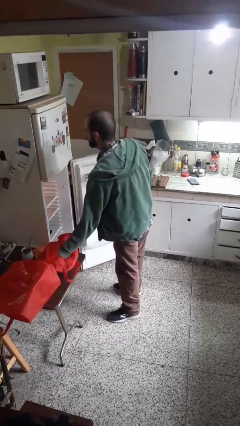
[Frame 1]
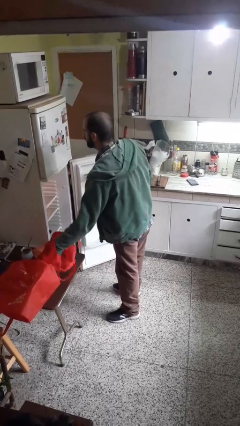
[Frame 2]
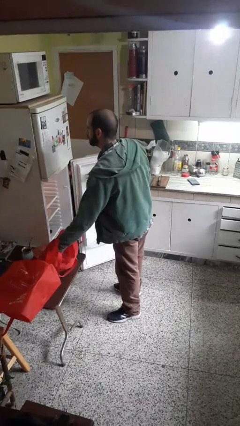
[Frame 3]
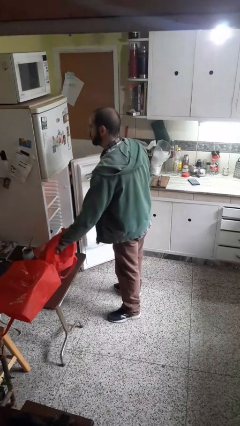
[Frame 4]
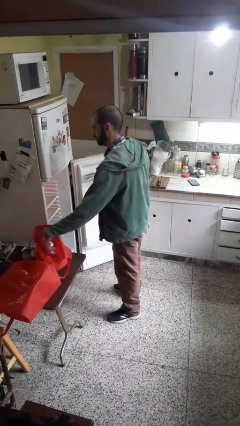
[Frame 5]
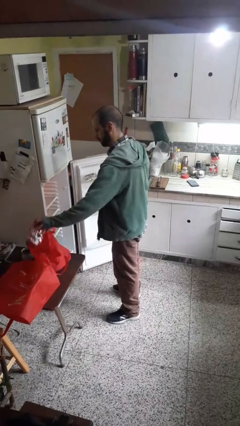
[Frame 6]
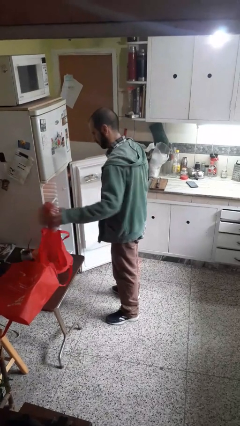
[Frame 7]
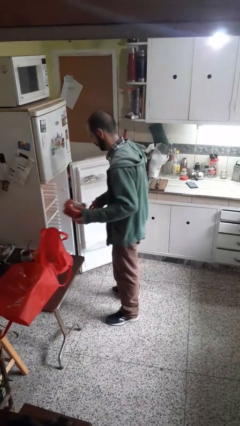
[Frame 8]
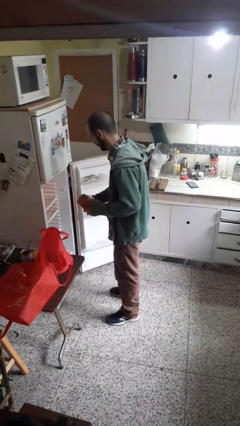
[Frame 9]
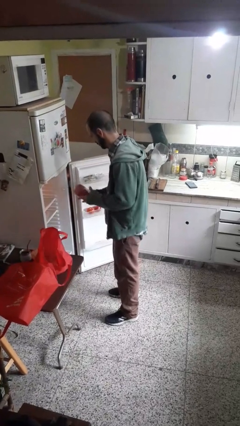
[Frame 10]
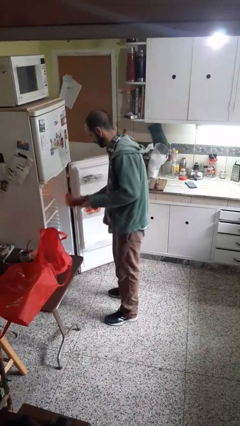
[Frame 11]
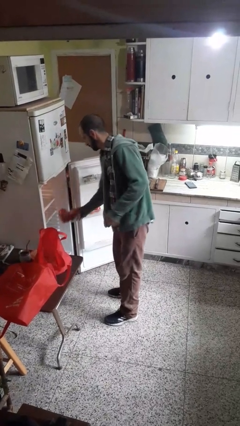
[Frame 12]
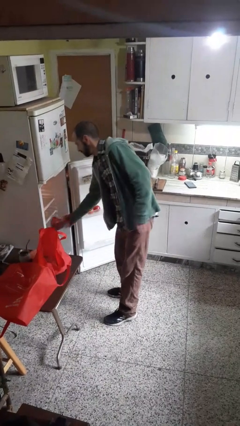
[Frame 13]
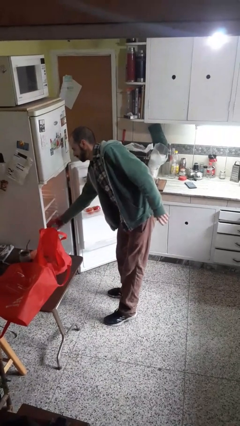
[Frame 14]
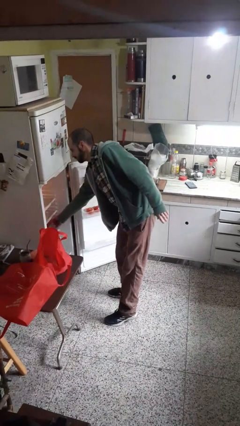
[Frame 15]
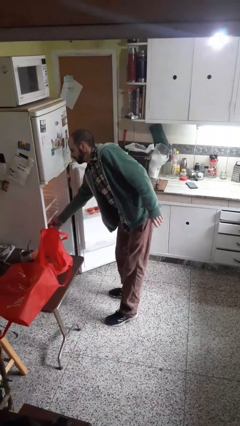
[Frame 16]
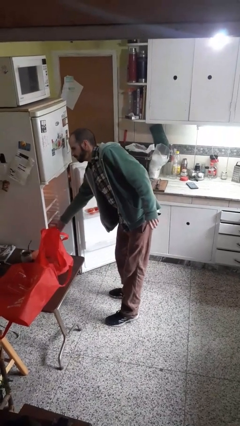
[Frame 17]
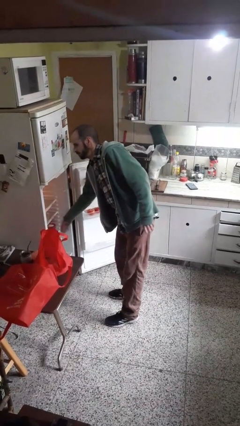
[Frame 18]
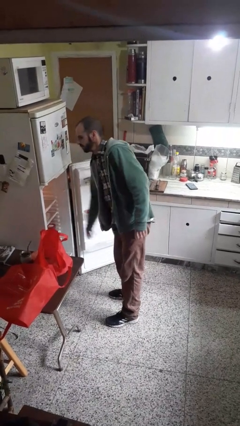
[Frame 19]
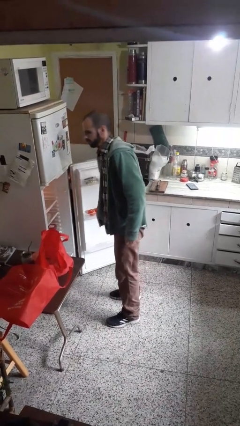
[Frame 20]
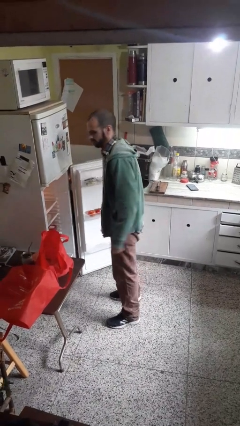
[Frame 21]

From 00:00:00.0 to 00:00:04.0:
person loads groceries into refrigerator

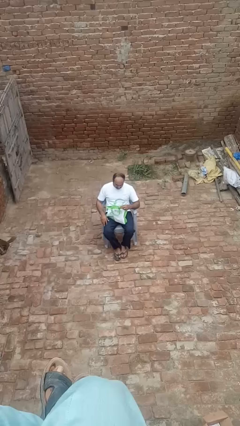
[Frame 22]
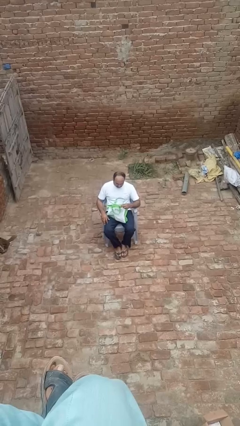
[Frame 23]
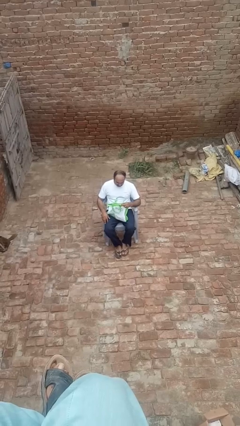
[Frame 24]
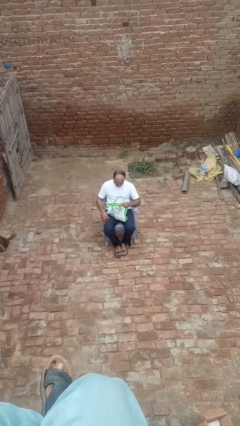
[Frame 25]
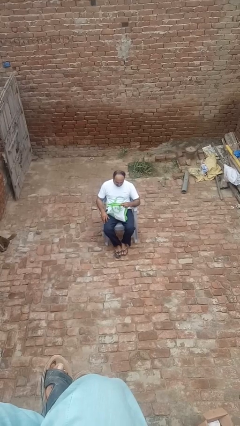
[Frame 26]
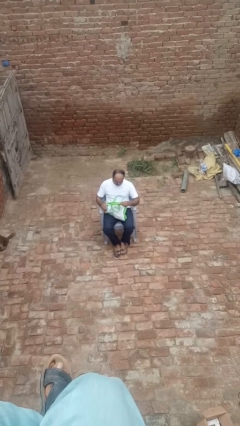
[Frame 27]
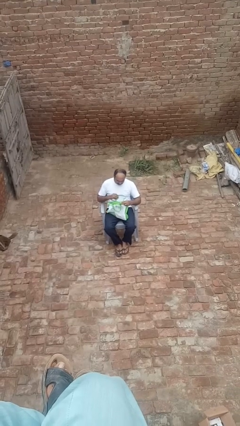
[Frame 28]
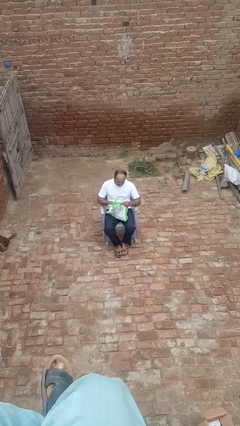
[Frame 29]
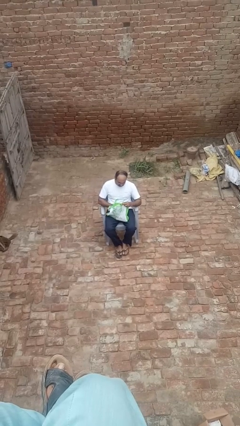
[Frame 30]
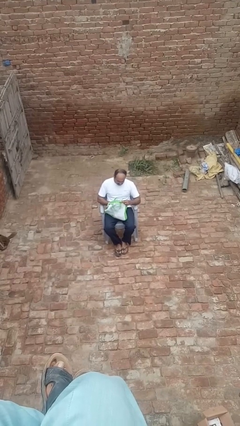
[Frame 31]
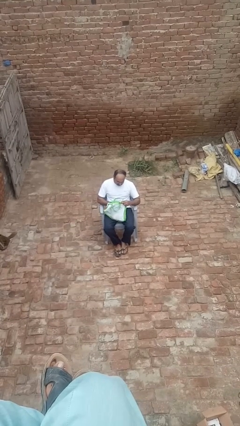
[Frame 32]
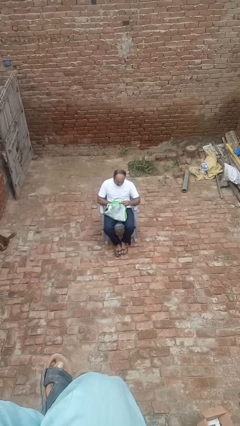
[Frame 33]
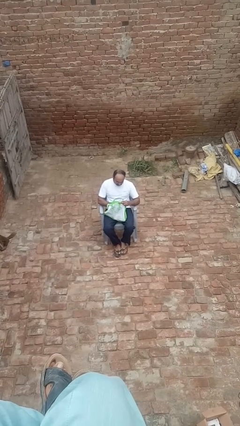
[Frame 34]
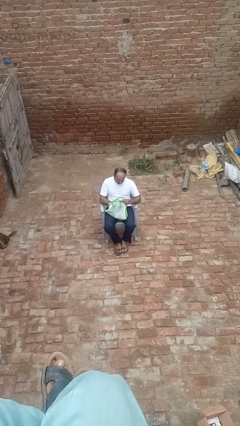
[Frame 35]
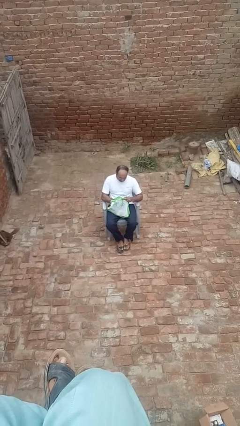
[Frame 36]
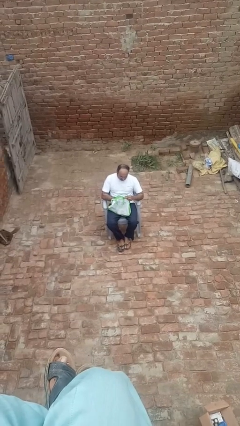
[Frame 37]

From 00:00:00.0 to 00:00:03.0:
person searches in bag

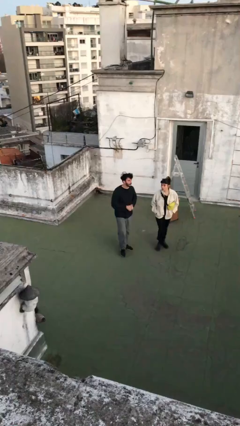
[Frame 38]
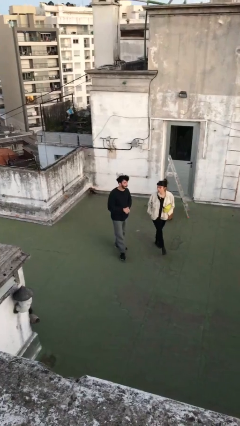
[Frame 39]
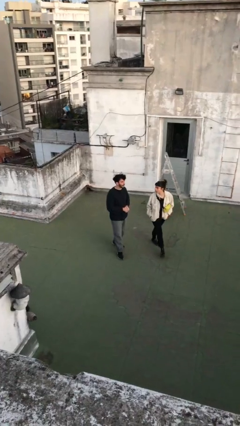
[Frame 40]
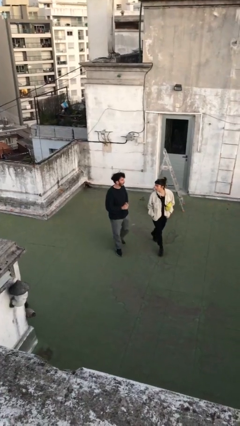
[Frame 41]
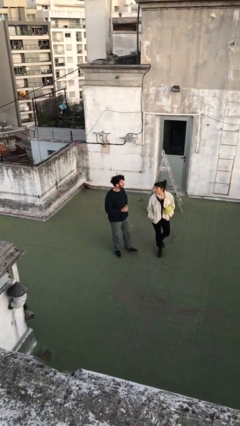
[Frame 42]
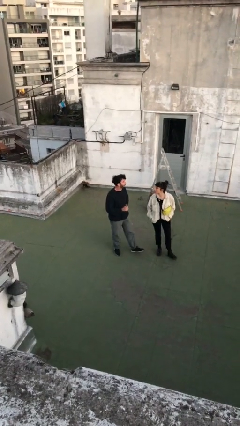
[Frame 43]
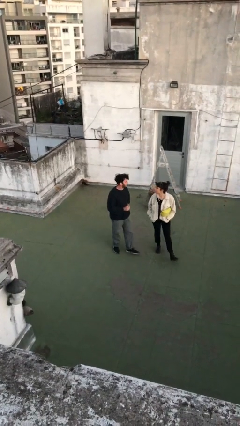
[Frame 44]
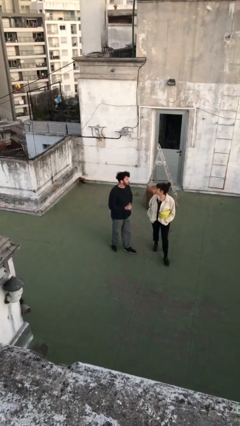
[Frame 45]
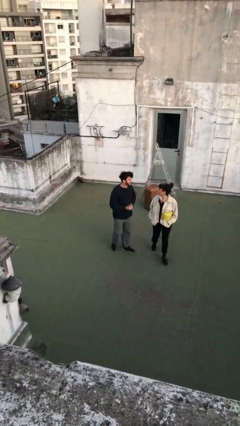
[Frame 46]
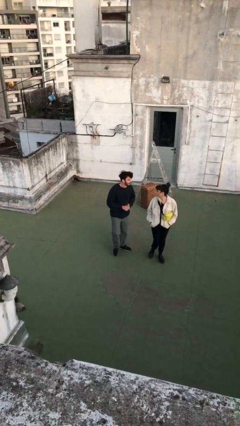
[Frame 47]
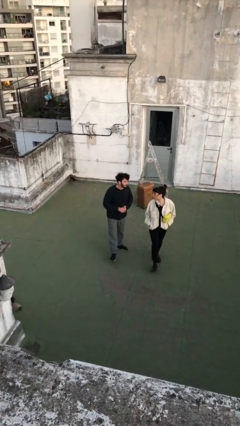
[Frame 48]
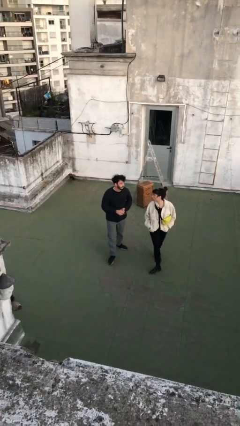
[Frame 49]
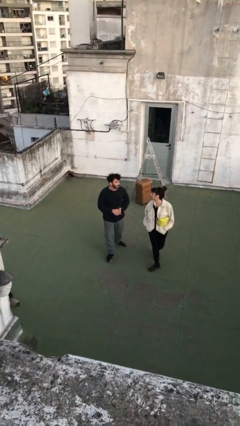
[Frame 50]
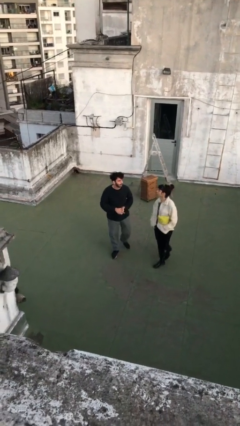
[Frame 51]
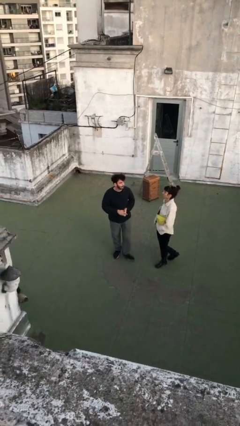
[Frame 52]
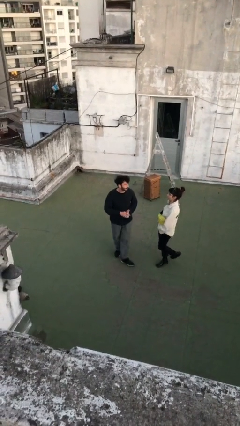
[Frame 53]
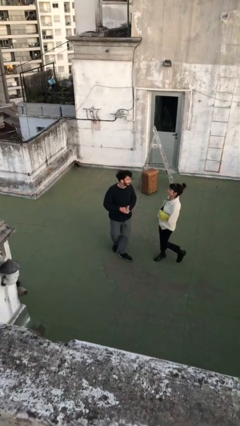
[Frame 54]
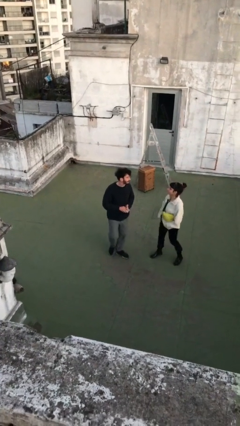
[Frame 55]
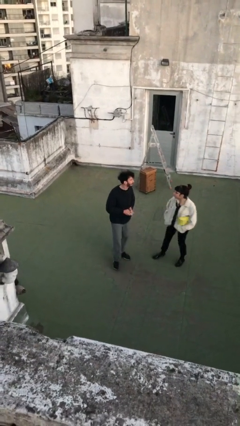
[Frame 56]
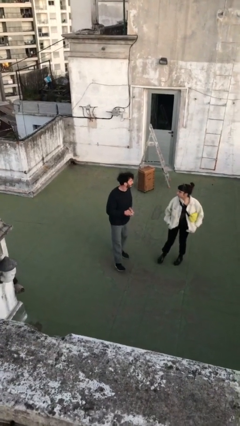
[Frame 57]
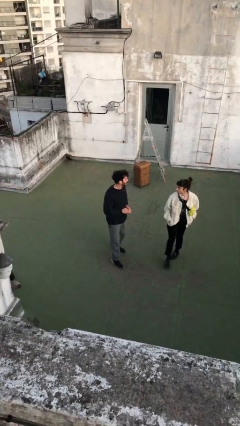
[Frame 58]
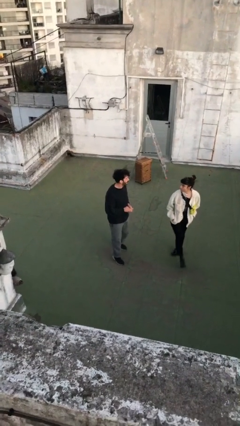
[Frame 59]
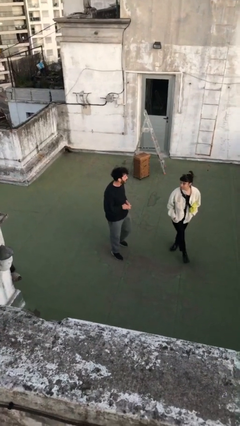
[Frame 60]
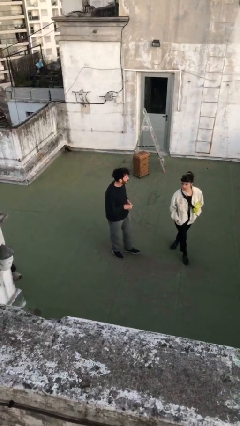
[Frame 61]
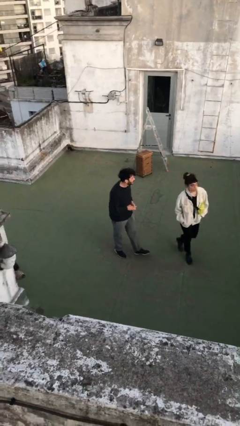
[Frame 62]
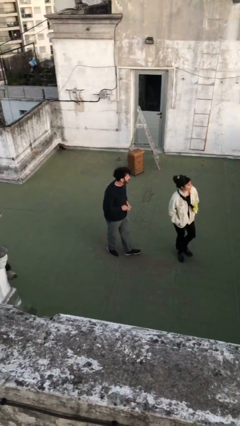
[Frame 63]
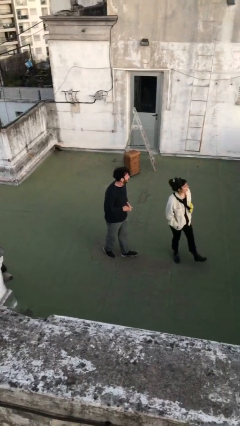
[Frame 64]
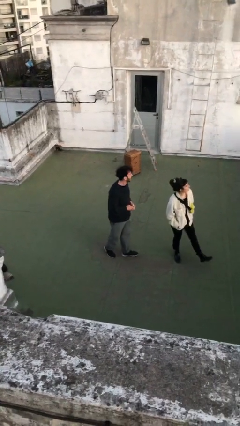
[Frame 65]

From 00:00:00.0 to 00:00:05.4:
person talks to person

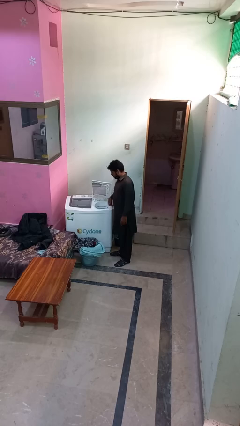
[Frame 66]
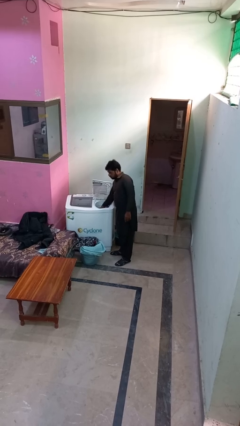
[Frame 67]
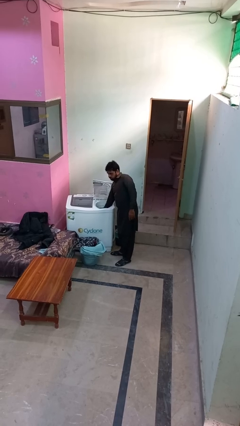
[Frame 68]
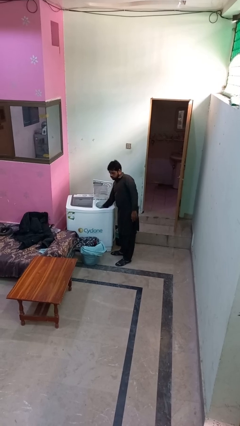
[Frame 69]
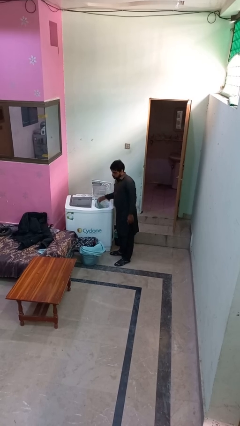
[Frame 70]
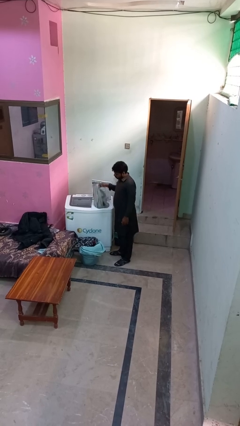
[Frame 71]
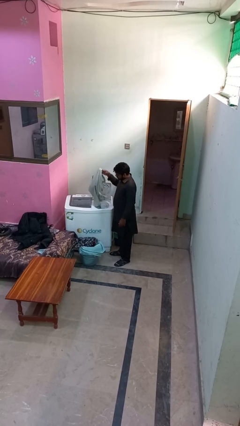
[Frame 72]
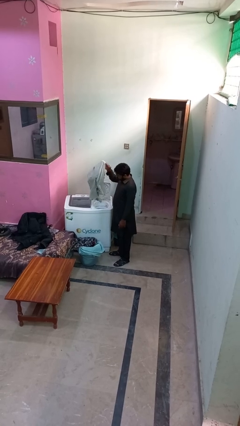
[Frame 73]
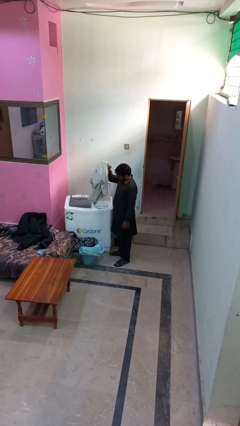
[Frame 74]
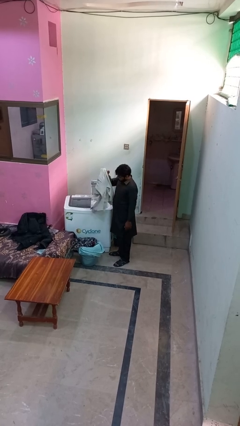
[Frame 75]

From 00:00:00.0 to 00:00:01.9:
person unloads dryer

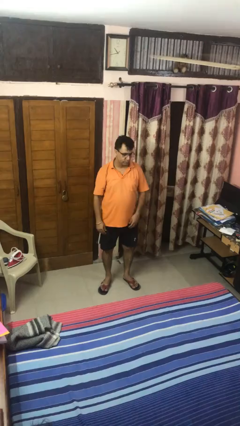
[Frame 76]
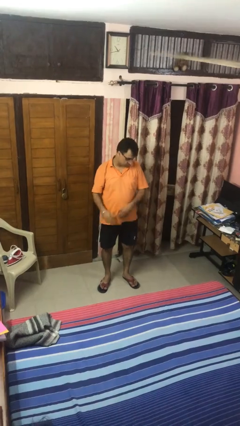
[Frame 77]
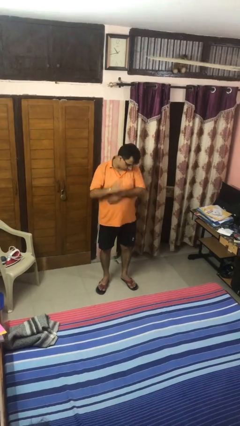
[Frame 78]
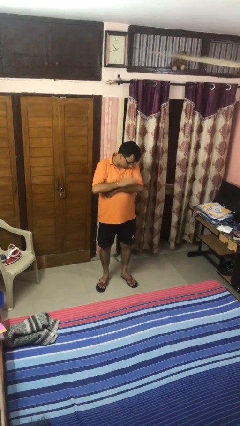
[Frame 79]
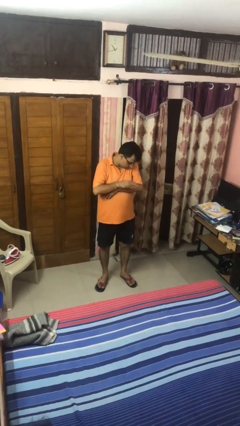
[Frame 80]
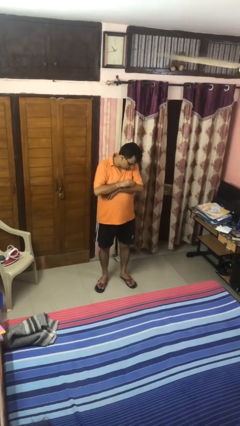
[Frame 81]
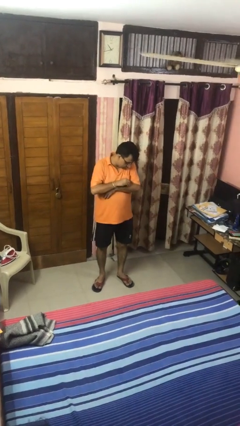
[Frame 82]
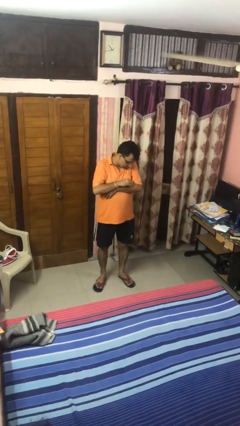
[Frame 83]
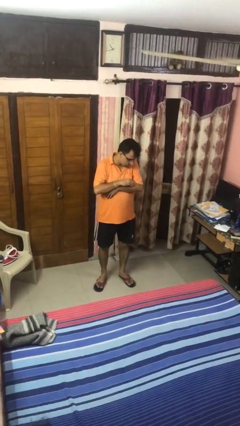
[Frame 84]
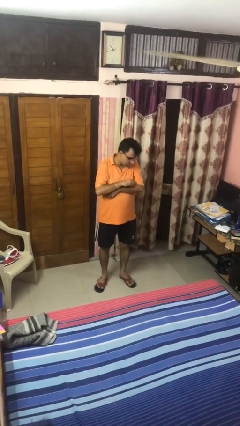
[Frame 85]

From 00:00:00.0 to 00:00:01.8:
person swats bug

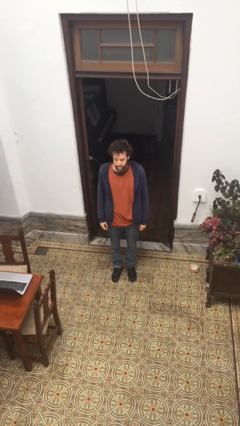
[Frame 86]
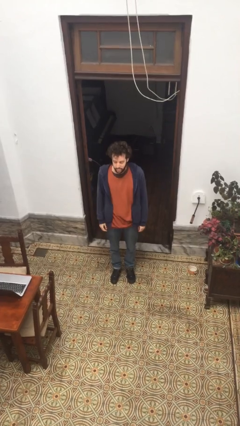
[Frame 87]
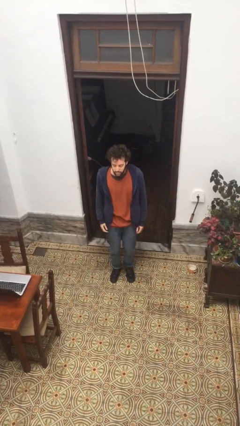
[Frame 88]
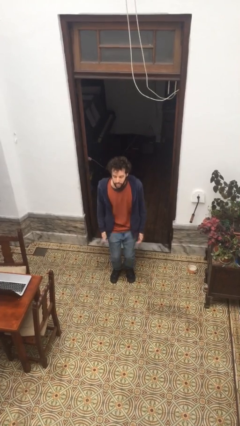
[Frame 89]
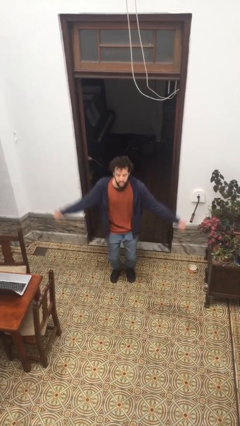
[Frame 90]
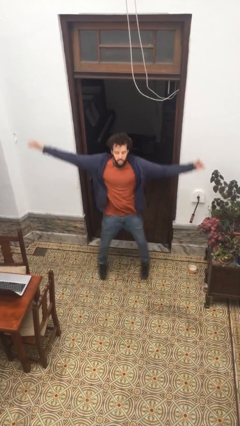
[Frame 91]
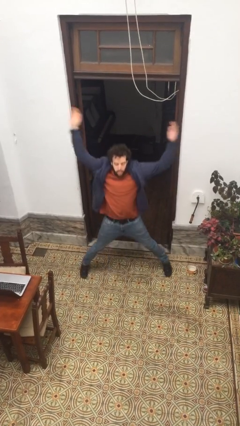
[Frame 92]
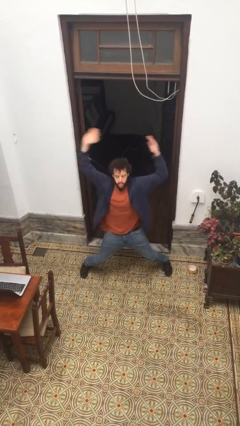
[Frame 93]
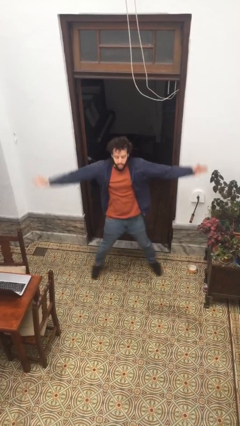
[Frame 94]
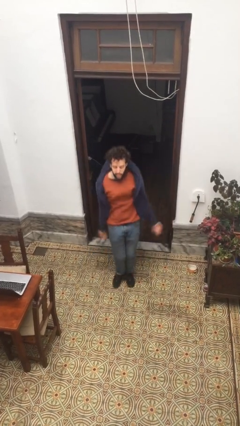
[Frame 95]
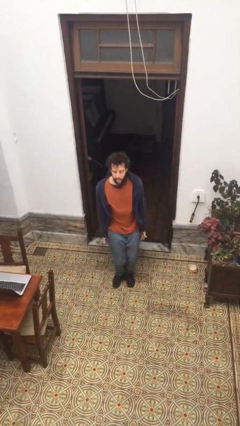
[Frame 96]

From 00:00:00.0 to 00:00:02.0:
person exercises with jumping jacks
